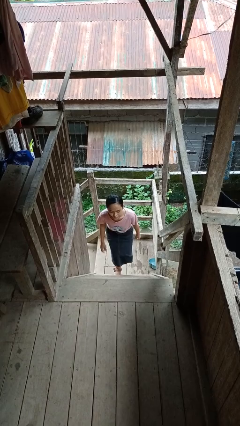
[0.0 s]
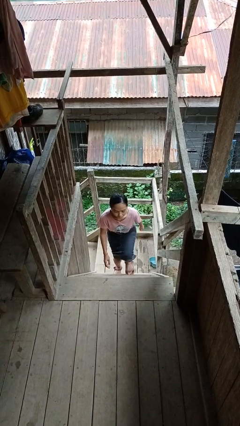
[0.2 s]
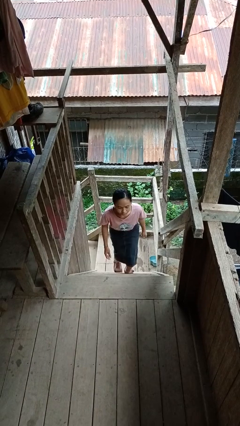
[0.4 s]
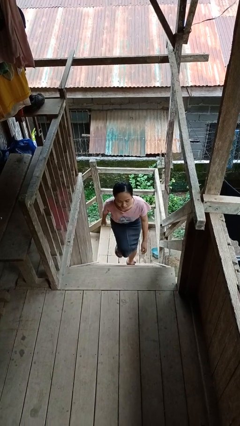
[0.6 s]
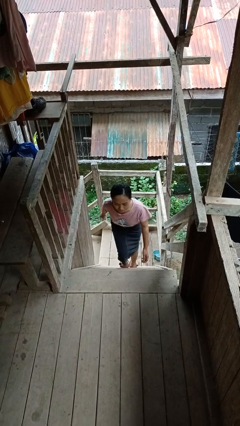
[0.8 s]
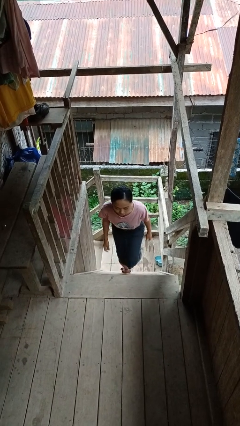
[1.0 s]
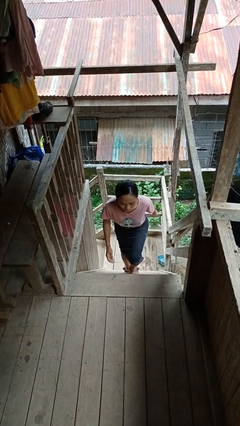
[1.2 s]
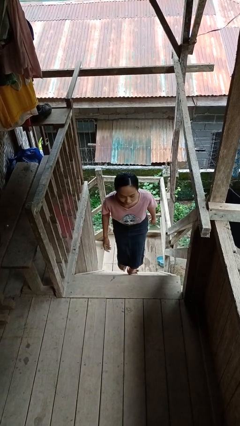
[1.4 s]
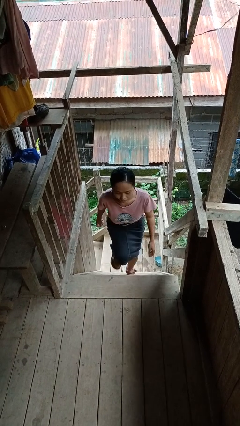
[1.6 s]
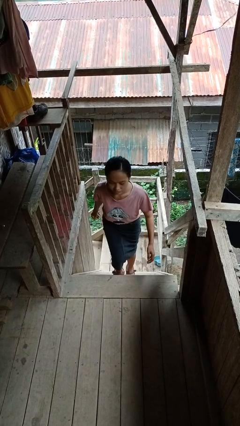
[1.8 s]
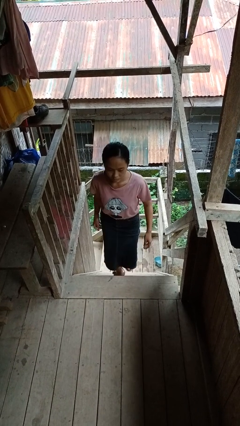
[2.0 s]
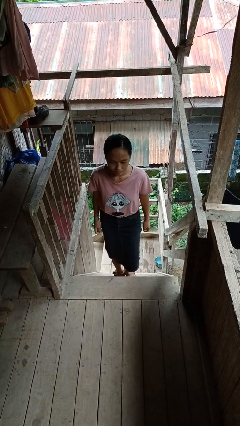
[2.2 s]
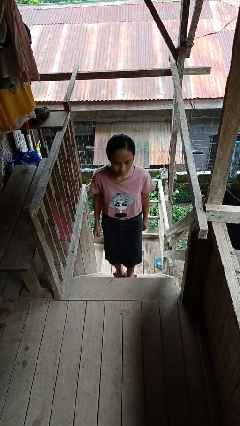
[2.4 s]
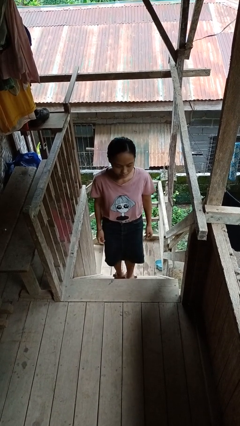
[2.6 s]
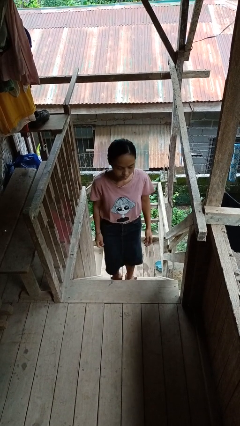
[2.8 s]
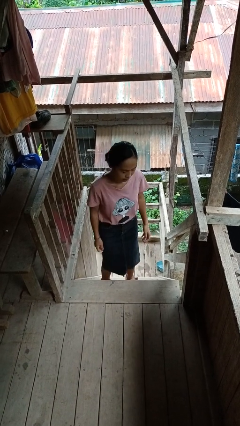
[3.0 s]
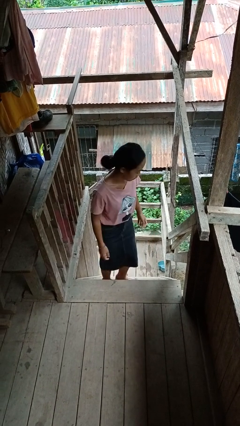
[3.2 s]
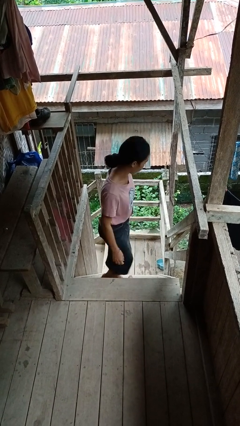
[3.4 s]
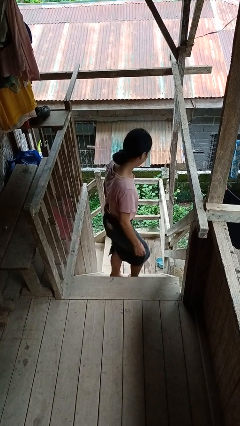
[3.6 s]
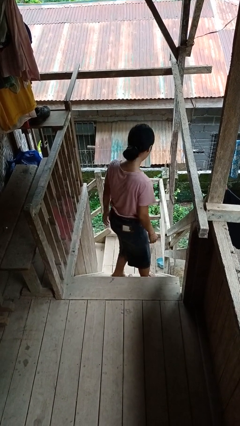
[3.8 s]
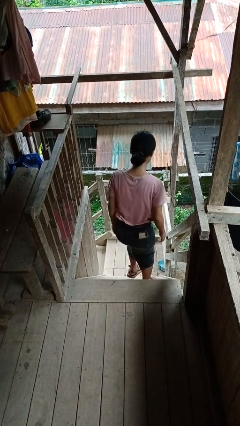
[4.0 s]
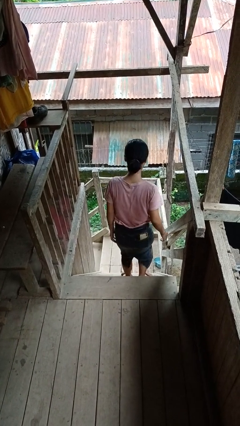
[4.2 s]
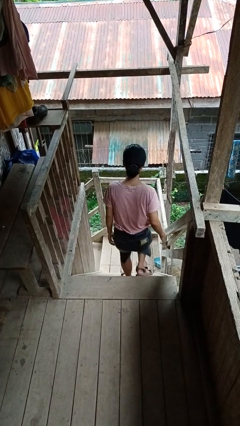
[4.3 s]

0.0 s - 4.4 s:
person climbs up stairs

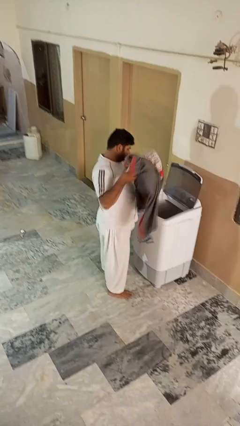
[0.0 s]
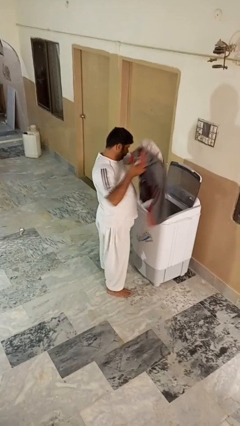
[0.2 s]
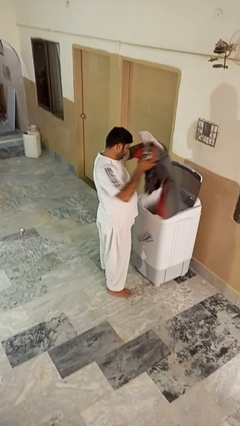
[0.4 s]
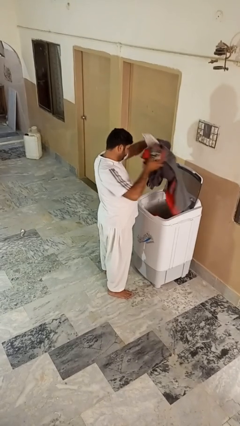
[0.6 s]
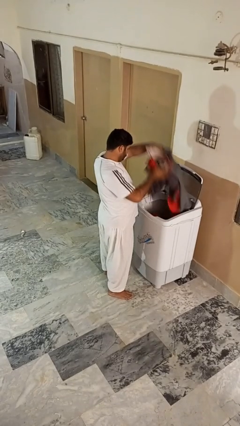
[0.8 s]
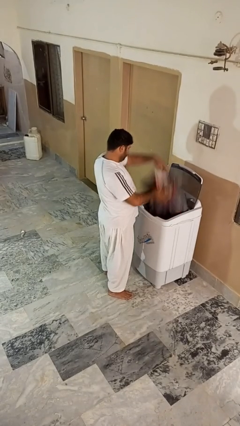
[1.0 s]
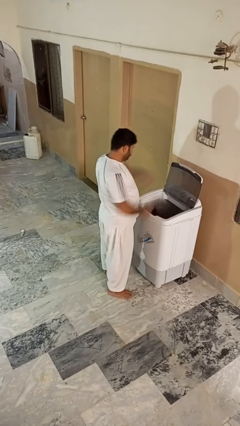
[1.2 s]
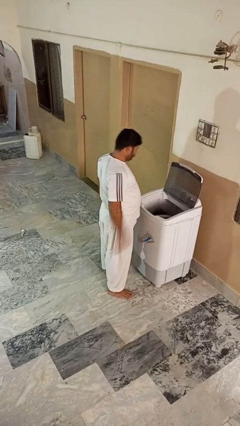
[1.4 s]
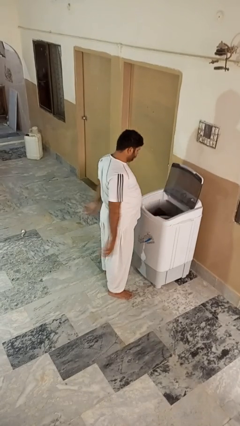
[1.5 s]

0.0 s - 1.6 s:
person loads clotheswasher

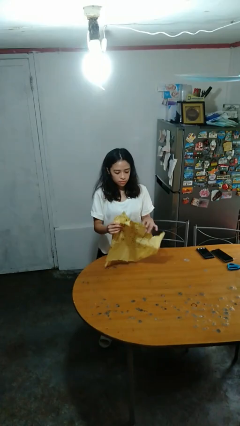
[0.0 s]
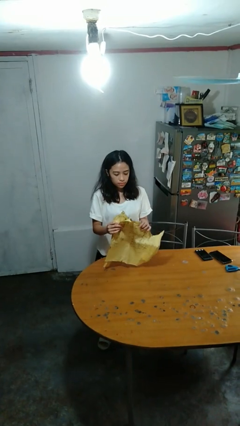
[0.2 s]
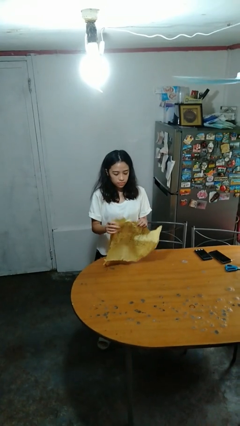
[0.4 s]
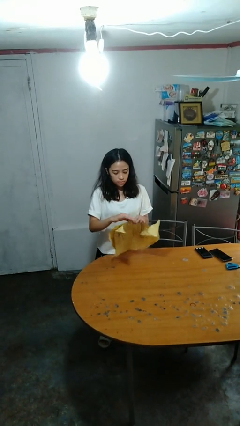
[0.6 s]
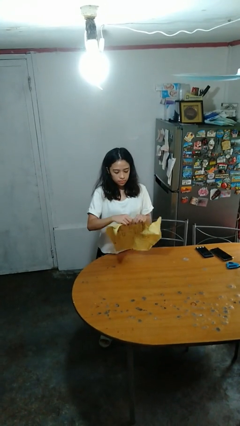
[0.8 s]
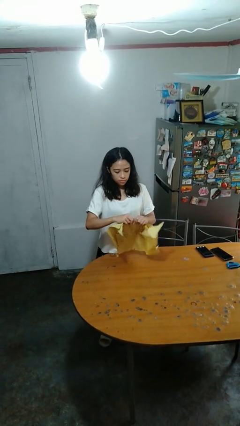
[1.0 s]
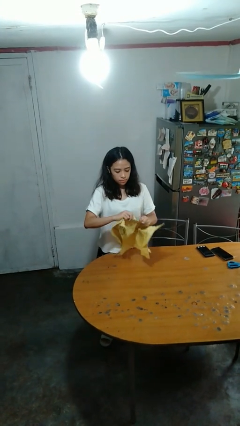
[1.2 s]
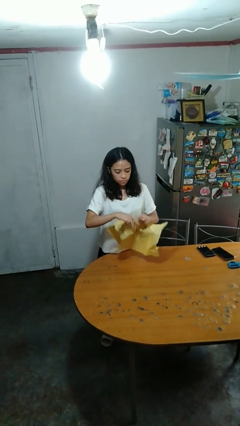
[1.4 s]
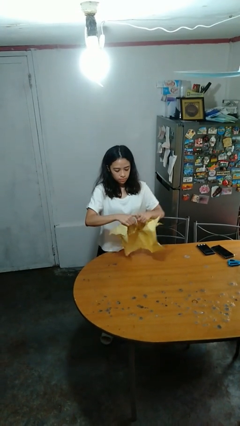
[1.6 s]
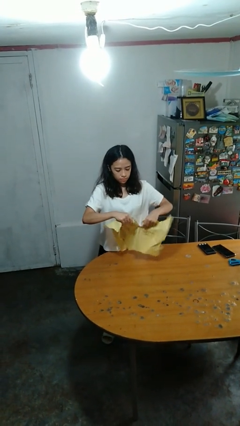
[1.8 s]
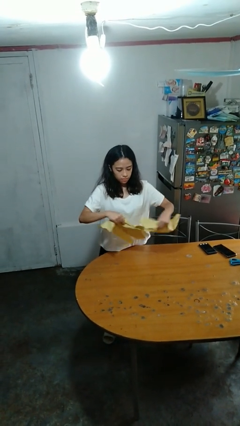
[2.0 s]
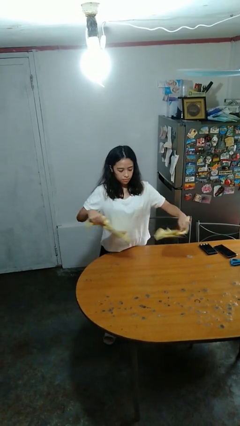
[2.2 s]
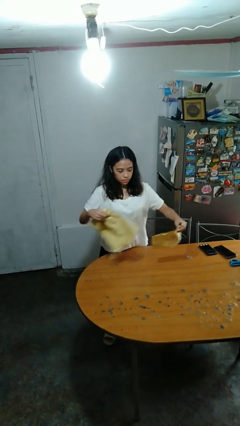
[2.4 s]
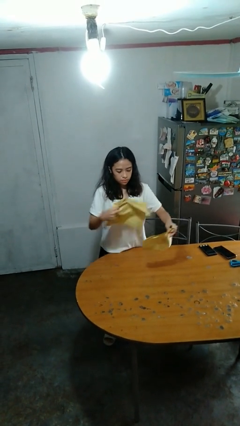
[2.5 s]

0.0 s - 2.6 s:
person tears paper

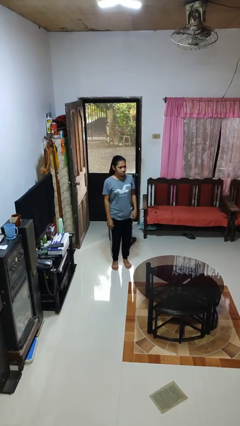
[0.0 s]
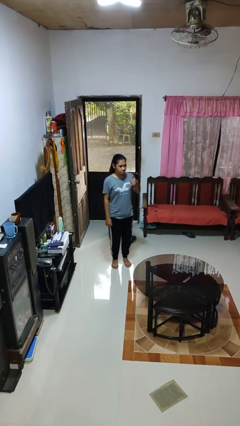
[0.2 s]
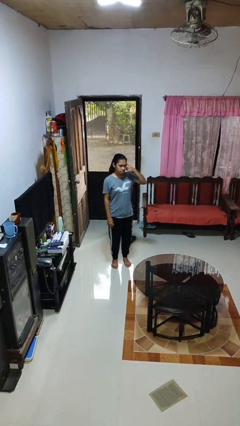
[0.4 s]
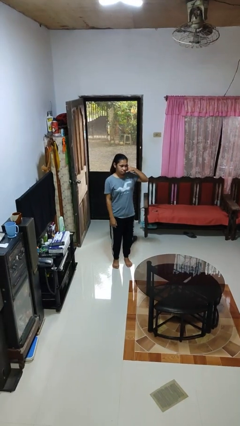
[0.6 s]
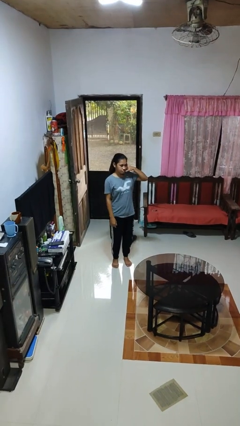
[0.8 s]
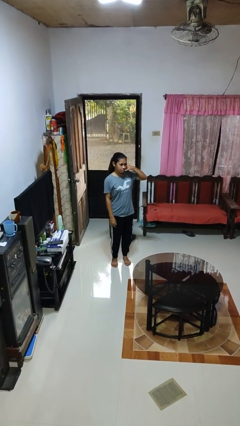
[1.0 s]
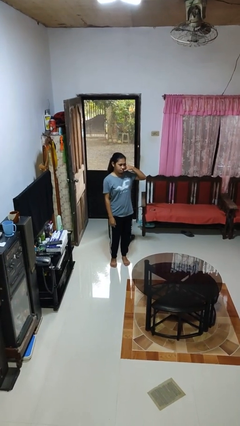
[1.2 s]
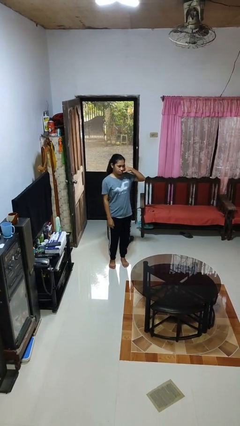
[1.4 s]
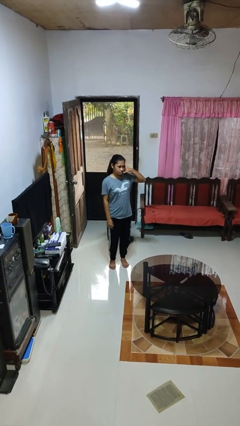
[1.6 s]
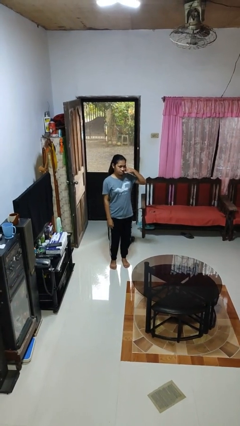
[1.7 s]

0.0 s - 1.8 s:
person gestures call me

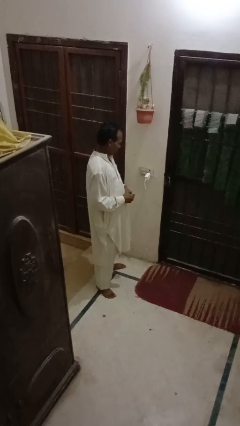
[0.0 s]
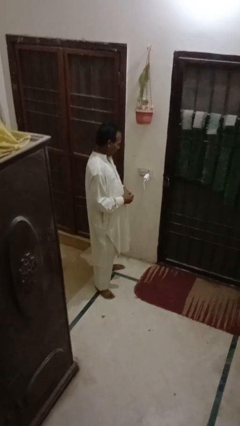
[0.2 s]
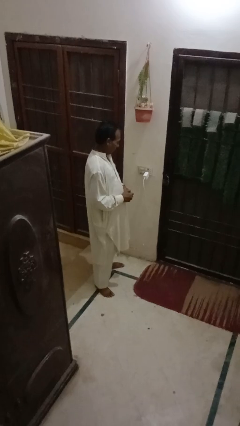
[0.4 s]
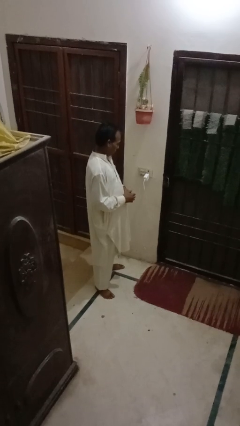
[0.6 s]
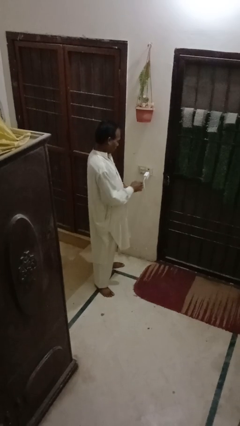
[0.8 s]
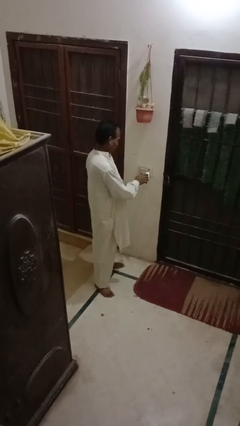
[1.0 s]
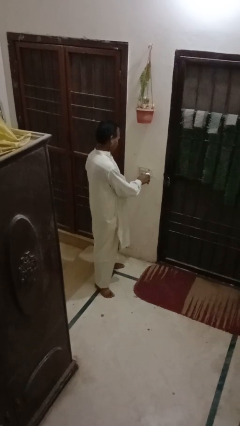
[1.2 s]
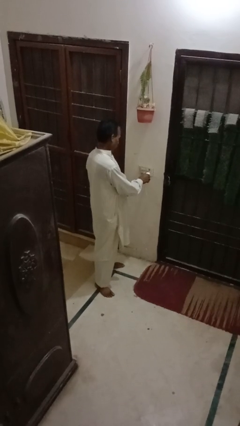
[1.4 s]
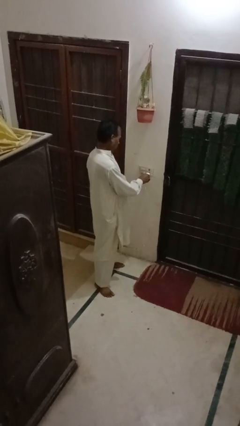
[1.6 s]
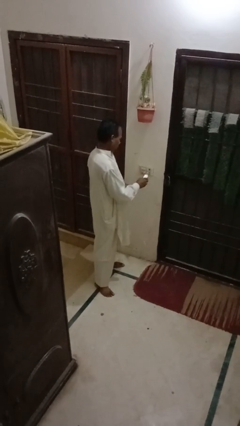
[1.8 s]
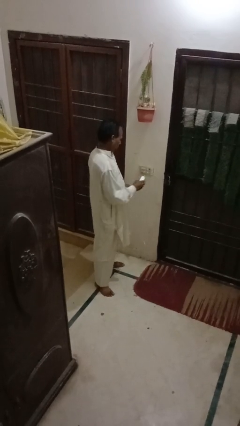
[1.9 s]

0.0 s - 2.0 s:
person unplugs from electrical socket

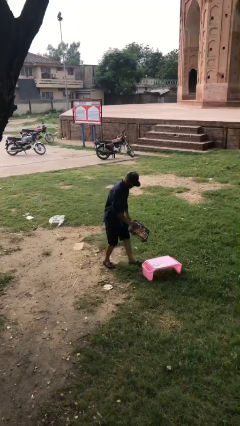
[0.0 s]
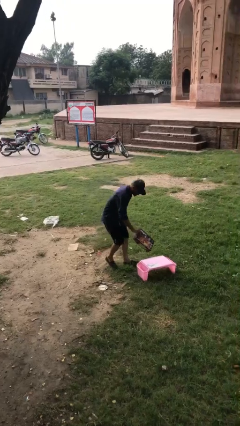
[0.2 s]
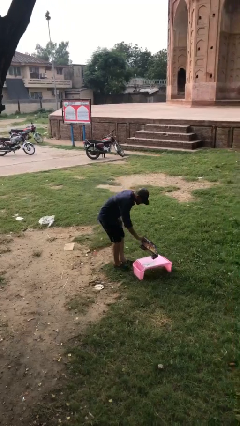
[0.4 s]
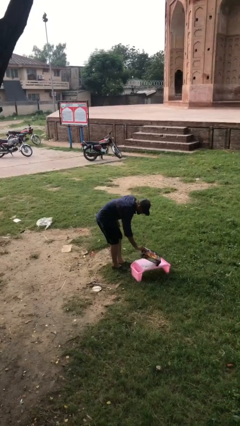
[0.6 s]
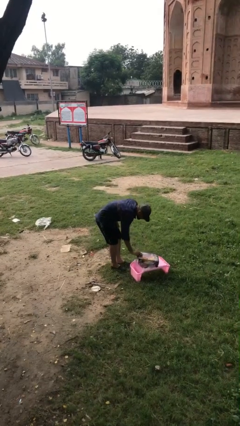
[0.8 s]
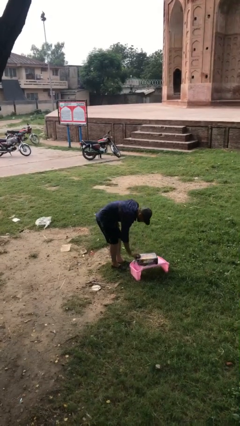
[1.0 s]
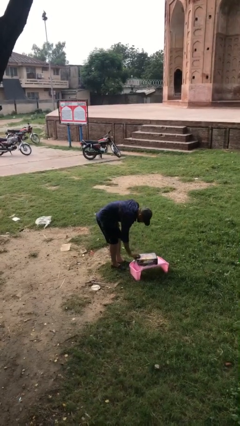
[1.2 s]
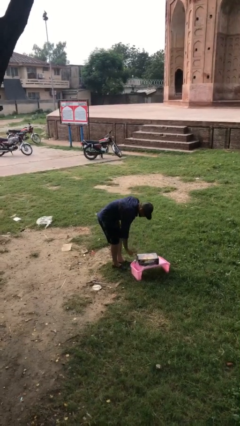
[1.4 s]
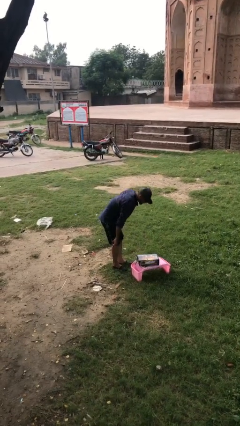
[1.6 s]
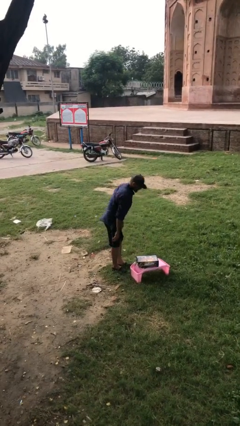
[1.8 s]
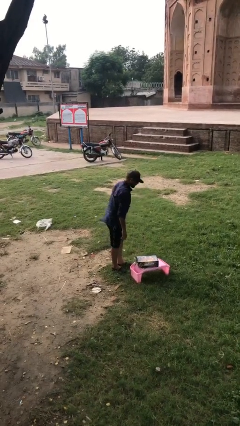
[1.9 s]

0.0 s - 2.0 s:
person puts down object on table

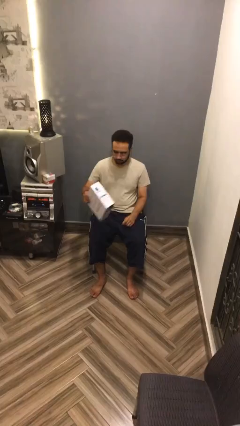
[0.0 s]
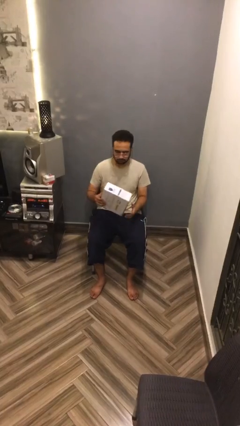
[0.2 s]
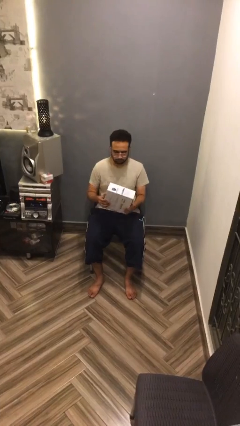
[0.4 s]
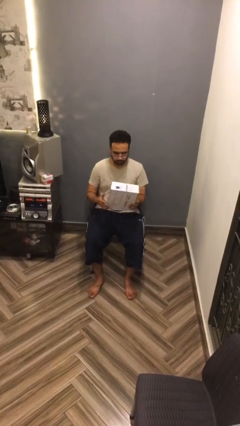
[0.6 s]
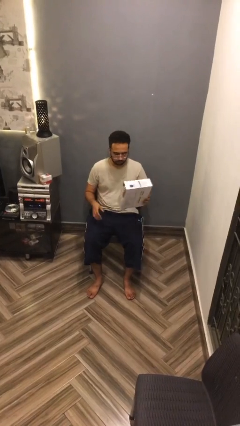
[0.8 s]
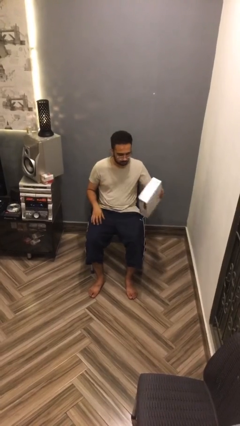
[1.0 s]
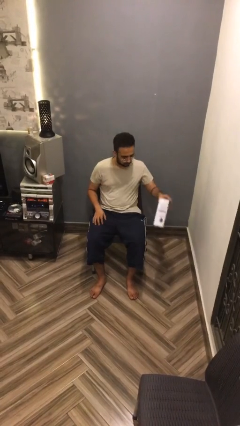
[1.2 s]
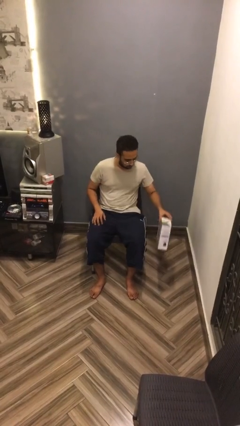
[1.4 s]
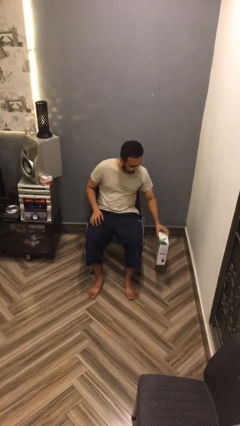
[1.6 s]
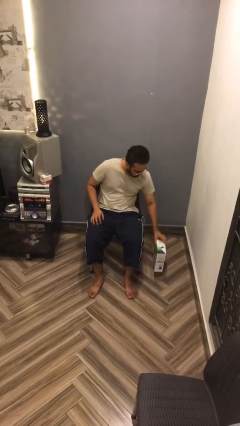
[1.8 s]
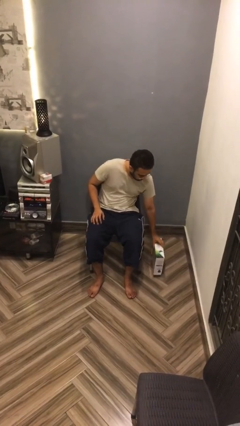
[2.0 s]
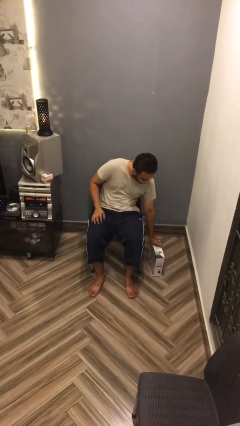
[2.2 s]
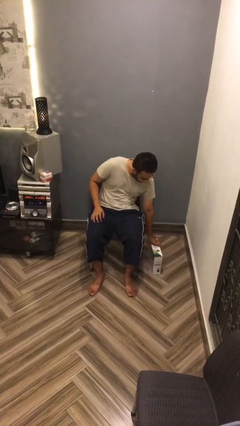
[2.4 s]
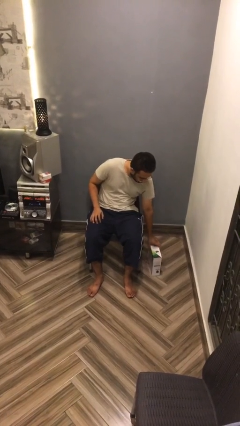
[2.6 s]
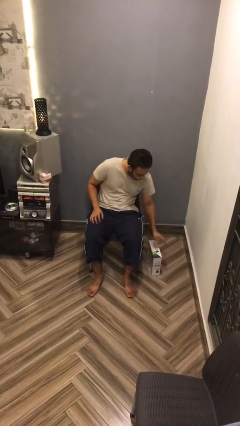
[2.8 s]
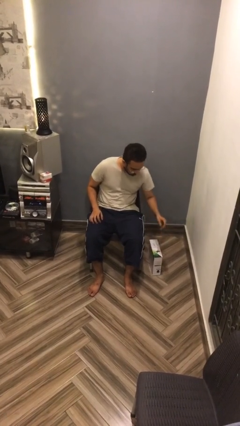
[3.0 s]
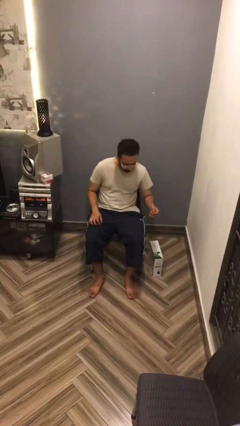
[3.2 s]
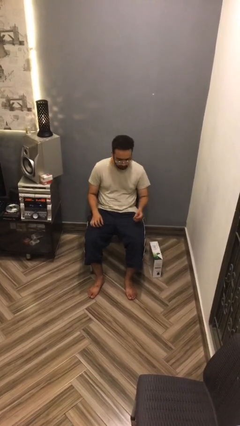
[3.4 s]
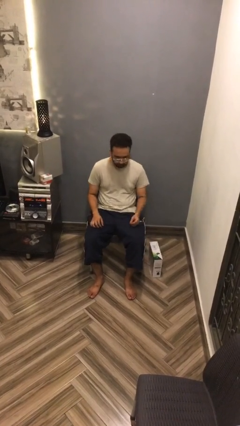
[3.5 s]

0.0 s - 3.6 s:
person puts down object on floor
